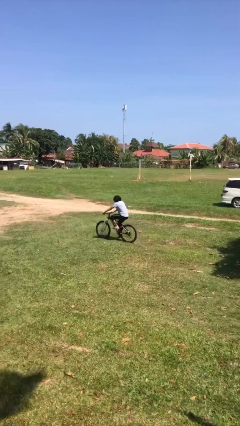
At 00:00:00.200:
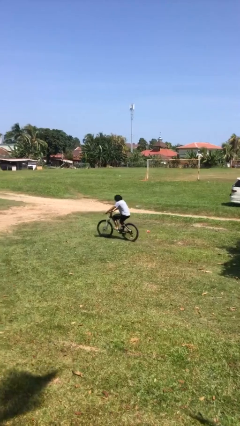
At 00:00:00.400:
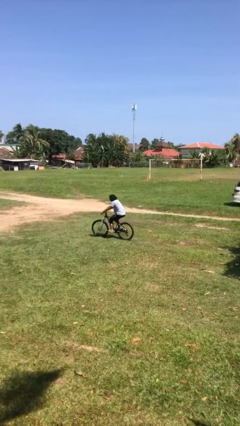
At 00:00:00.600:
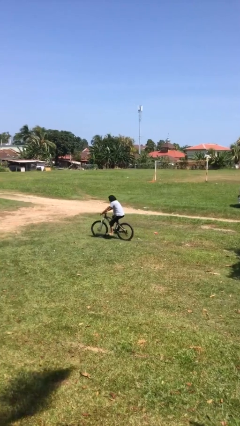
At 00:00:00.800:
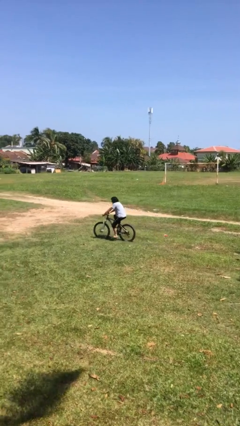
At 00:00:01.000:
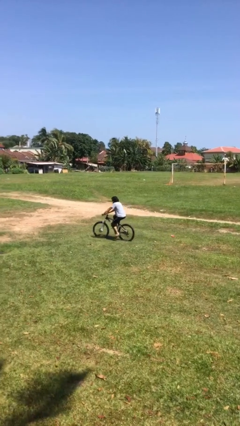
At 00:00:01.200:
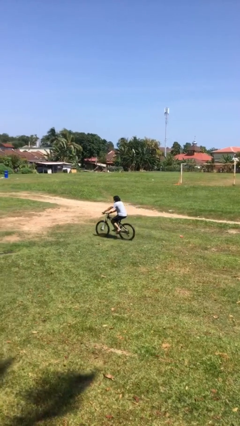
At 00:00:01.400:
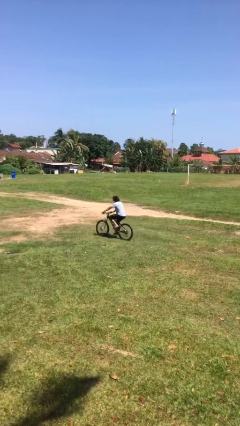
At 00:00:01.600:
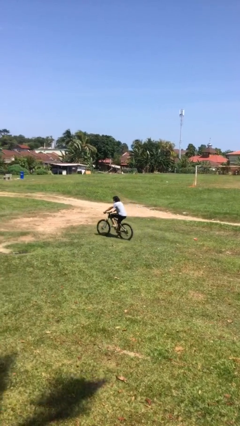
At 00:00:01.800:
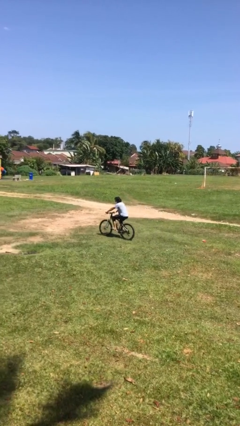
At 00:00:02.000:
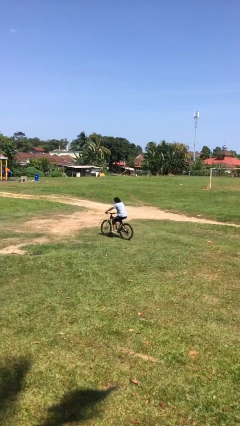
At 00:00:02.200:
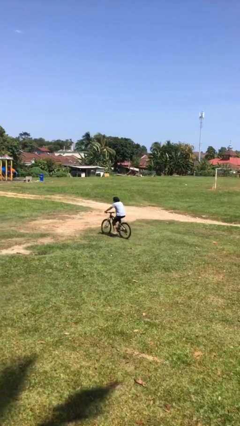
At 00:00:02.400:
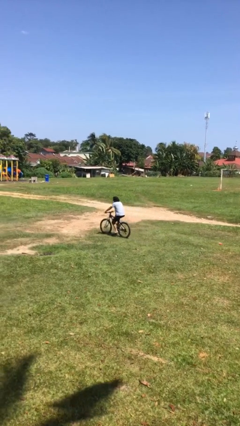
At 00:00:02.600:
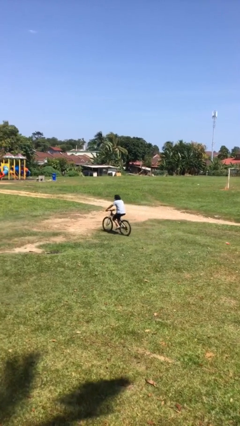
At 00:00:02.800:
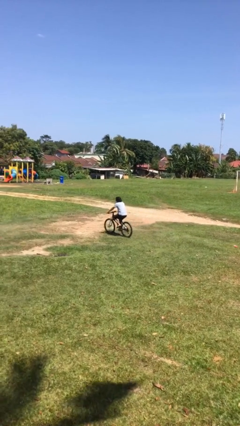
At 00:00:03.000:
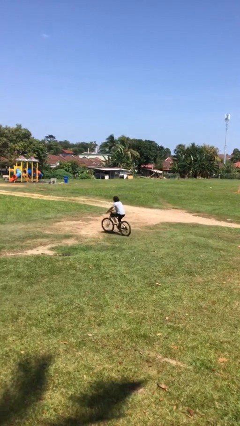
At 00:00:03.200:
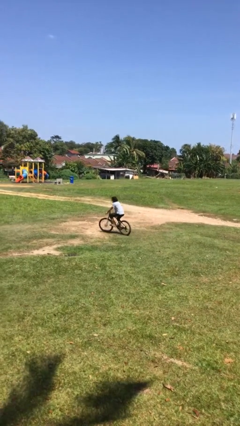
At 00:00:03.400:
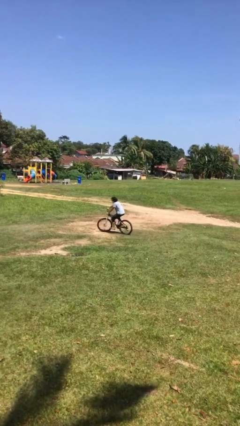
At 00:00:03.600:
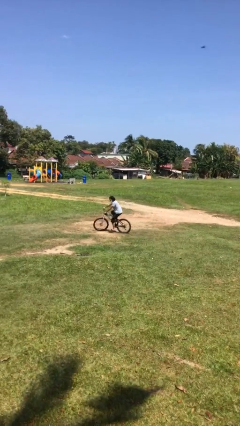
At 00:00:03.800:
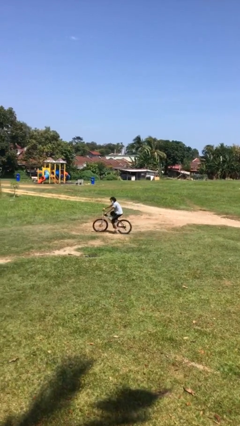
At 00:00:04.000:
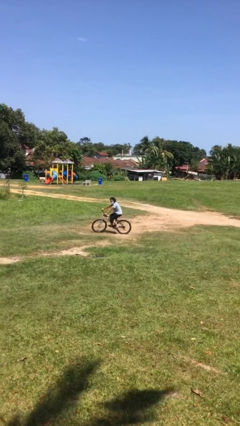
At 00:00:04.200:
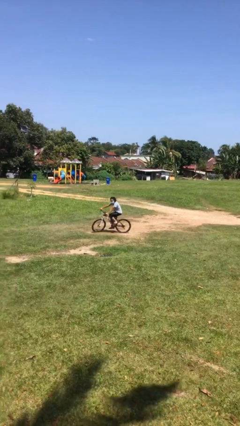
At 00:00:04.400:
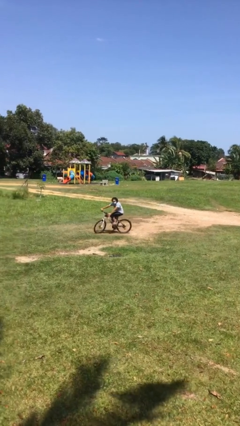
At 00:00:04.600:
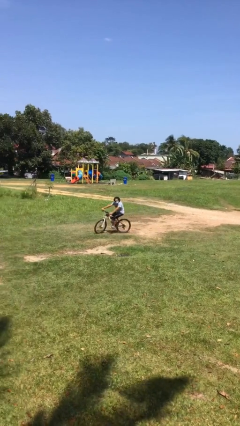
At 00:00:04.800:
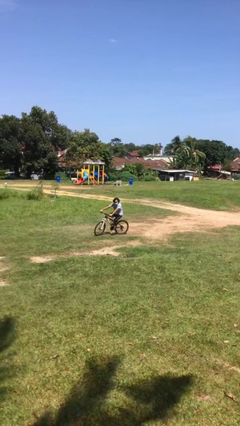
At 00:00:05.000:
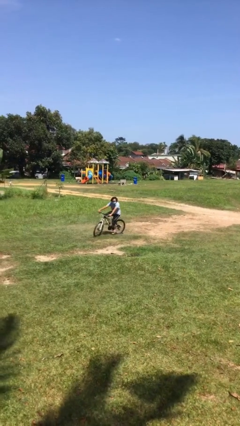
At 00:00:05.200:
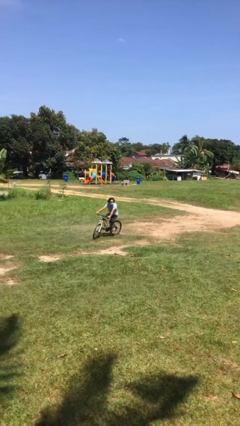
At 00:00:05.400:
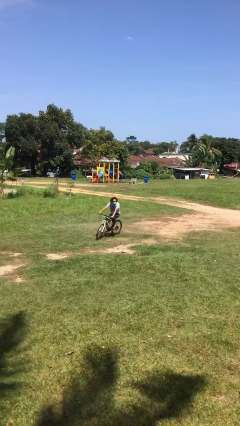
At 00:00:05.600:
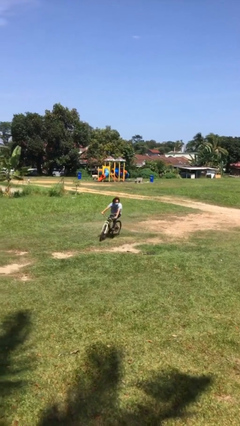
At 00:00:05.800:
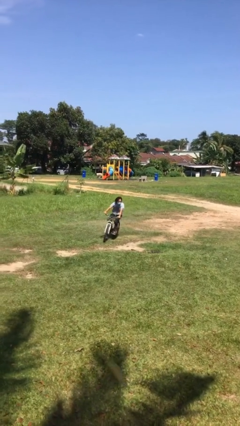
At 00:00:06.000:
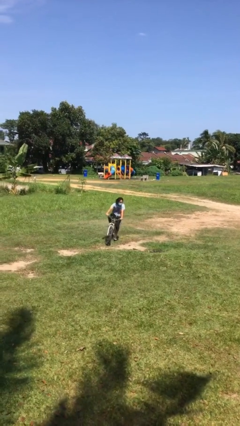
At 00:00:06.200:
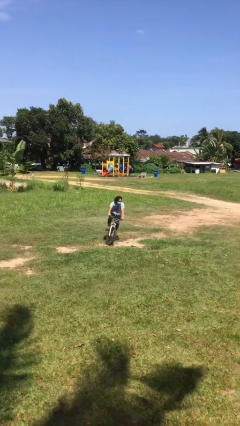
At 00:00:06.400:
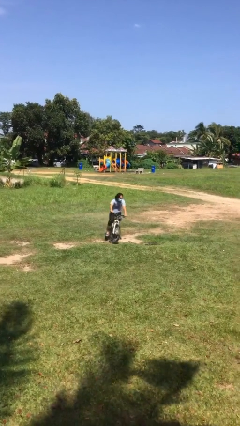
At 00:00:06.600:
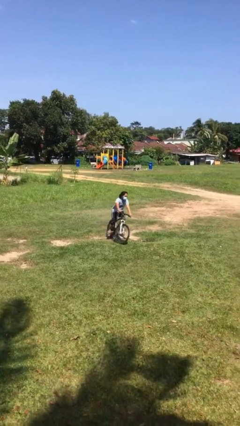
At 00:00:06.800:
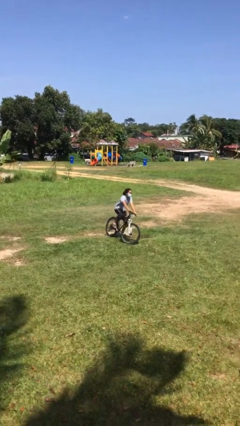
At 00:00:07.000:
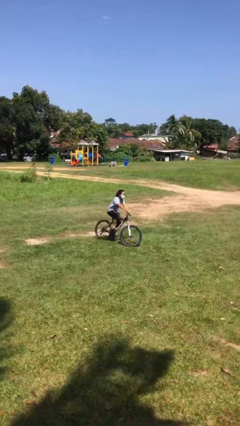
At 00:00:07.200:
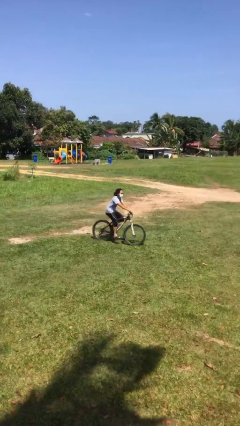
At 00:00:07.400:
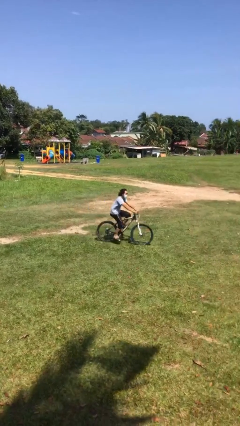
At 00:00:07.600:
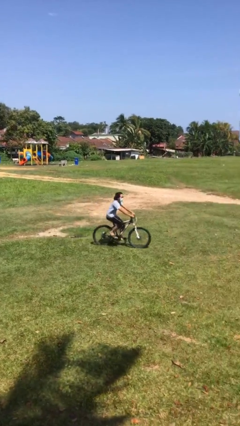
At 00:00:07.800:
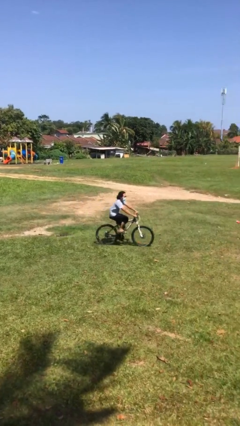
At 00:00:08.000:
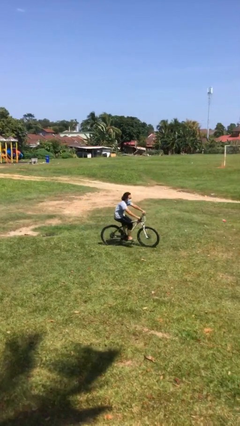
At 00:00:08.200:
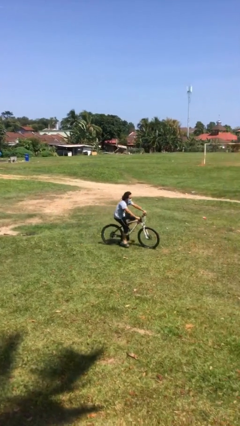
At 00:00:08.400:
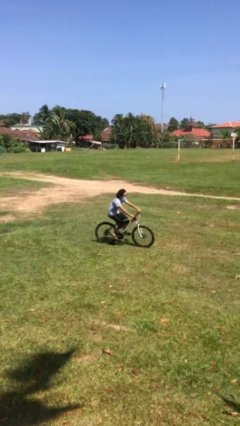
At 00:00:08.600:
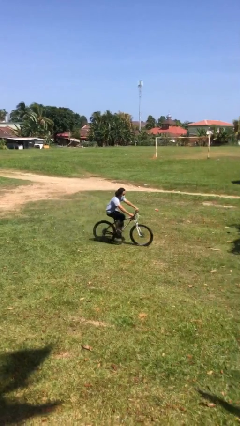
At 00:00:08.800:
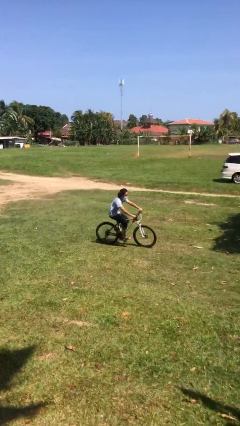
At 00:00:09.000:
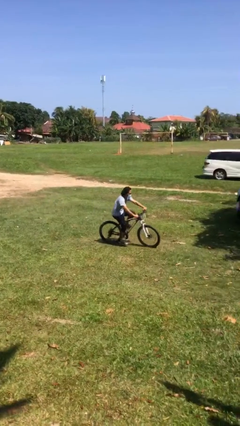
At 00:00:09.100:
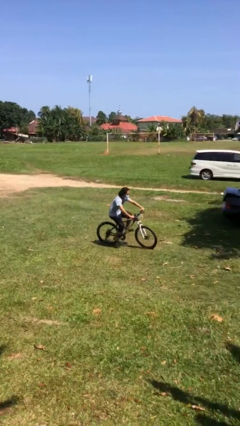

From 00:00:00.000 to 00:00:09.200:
person rides bicycle

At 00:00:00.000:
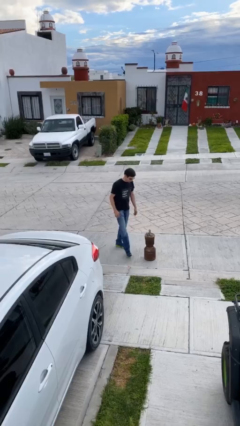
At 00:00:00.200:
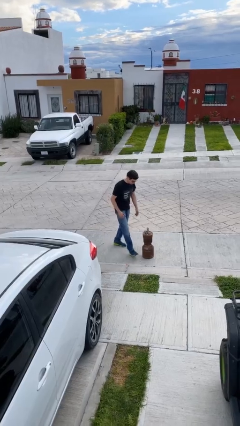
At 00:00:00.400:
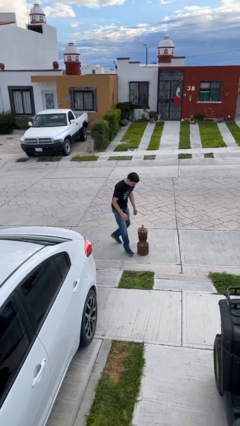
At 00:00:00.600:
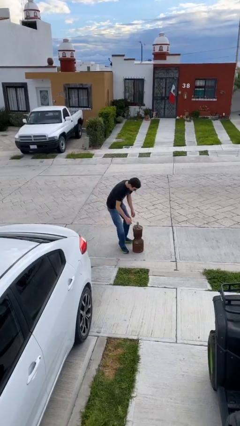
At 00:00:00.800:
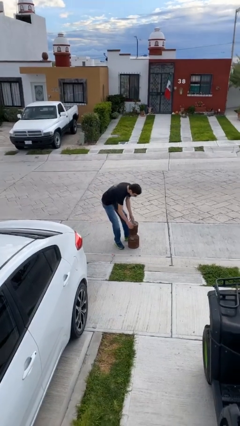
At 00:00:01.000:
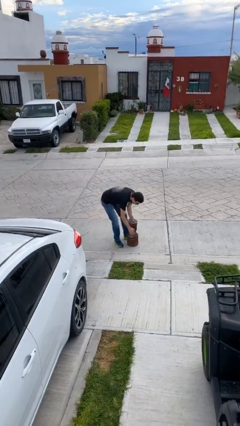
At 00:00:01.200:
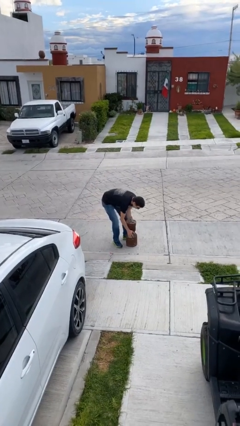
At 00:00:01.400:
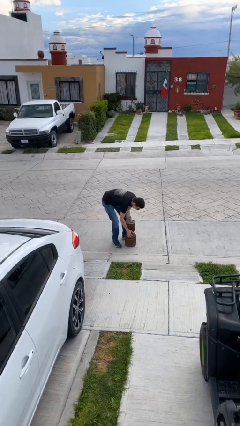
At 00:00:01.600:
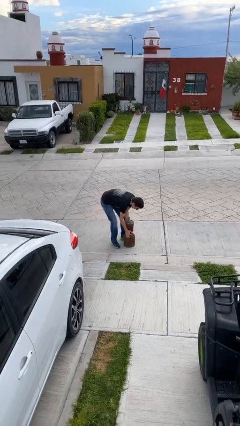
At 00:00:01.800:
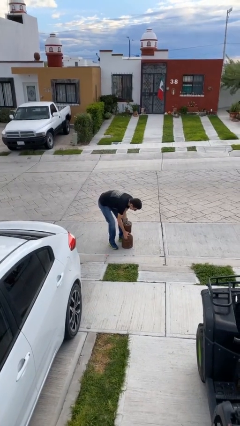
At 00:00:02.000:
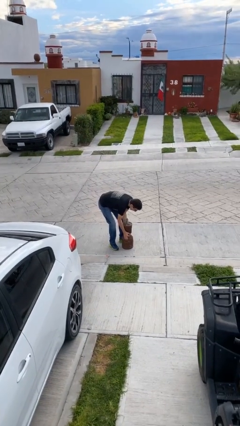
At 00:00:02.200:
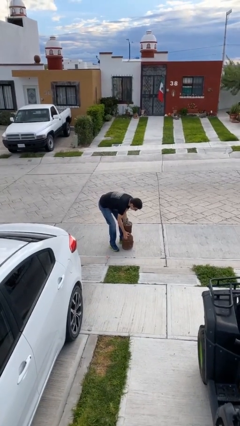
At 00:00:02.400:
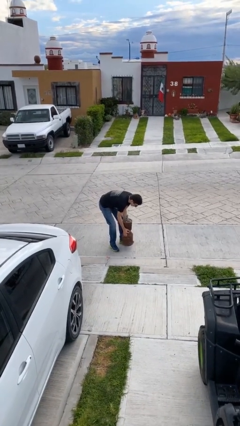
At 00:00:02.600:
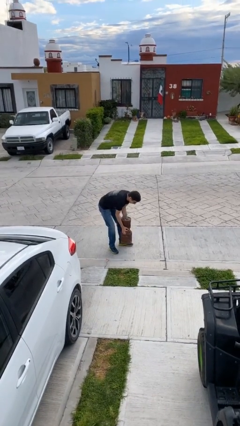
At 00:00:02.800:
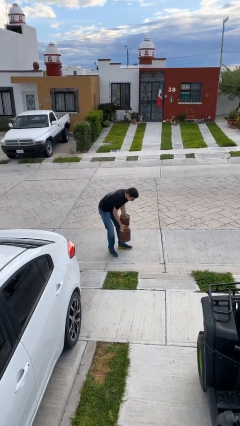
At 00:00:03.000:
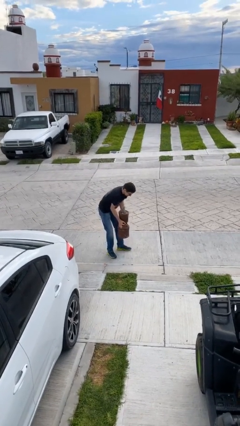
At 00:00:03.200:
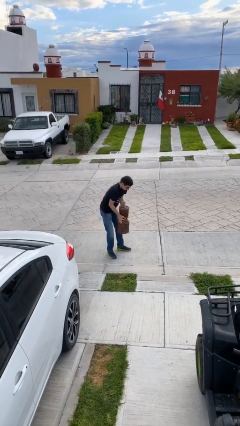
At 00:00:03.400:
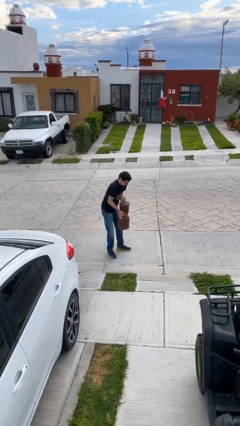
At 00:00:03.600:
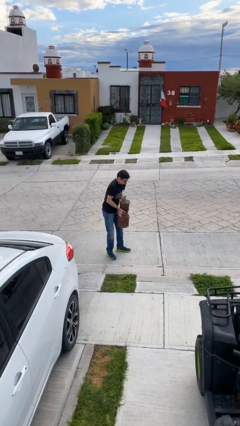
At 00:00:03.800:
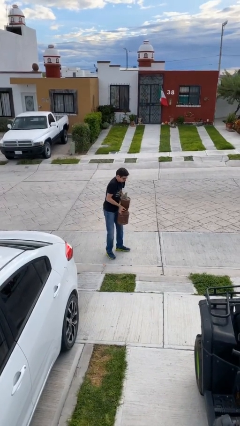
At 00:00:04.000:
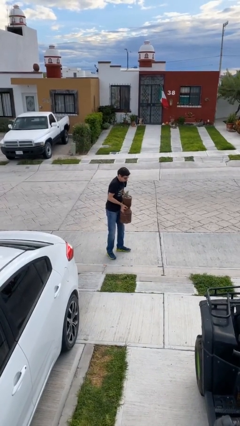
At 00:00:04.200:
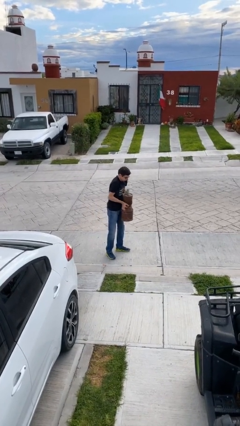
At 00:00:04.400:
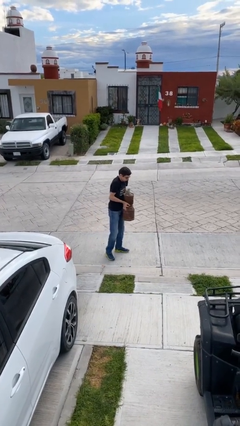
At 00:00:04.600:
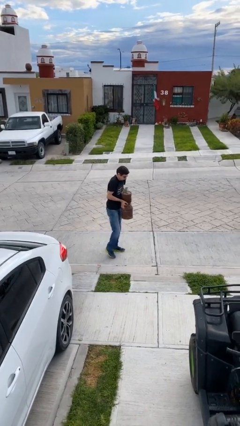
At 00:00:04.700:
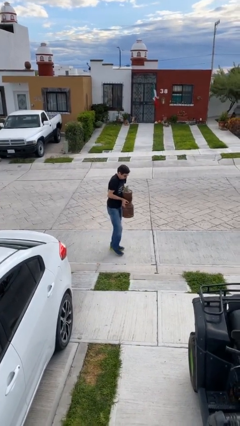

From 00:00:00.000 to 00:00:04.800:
person picks up object from floor

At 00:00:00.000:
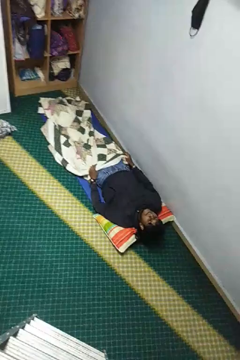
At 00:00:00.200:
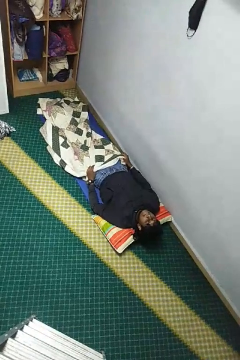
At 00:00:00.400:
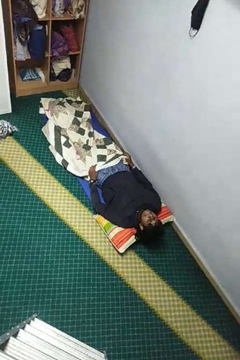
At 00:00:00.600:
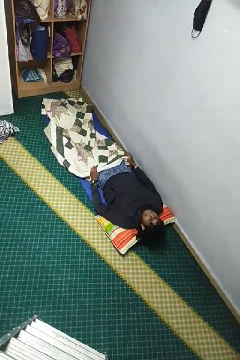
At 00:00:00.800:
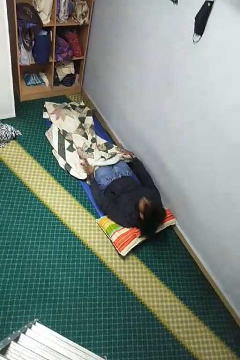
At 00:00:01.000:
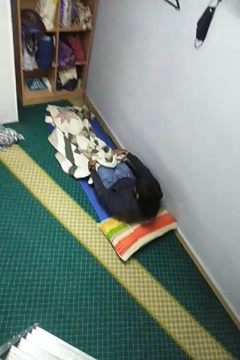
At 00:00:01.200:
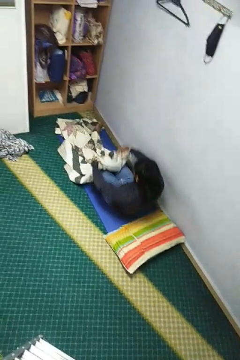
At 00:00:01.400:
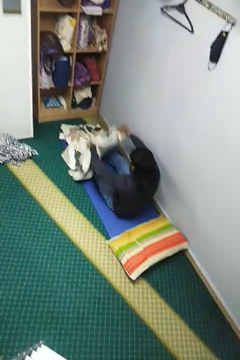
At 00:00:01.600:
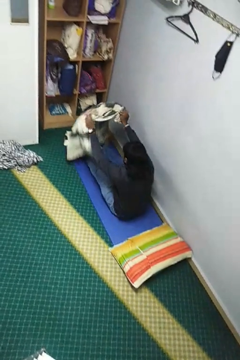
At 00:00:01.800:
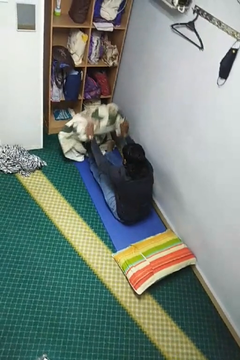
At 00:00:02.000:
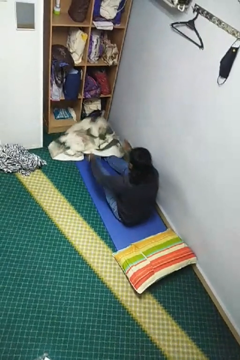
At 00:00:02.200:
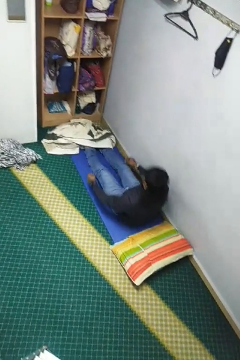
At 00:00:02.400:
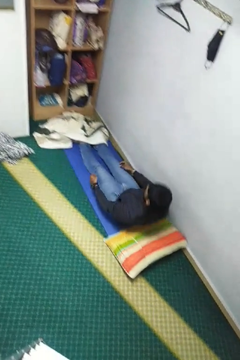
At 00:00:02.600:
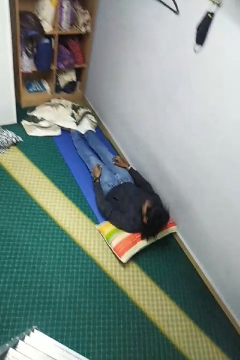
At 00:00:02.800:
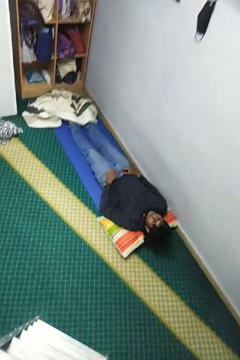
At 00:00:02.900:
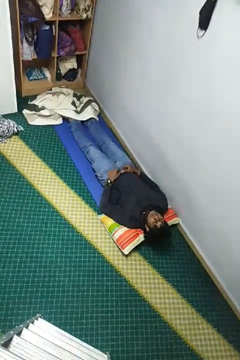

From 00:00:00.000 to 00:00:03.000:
person uncovers with bedsheets

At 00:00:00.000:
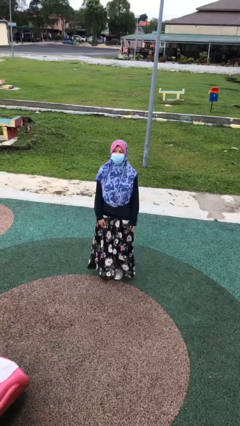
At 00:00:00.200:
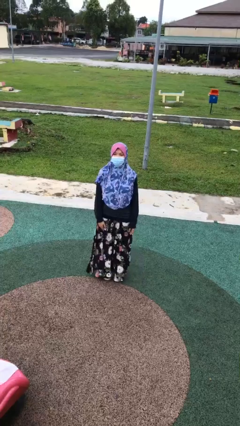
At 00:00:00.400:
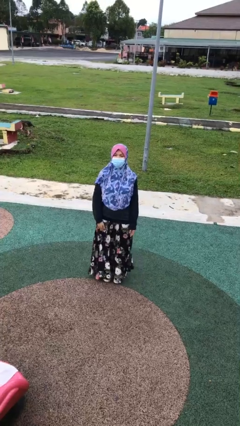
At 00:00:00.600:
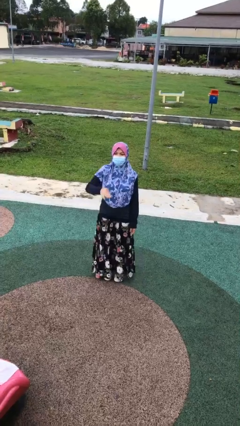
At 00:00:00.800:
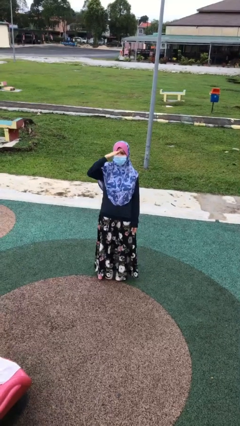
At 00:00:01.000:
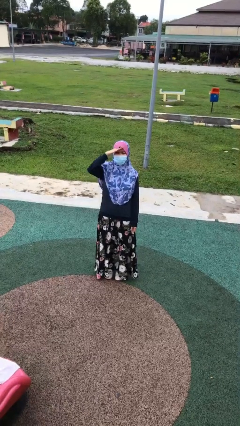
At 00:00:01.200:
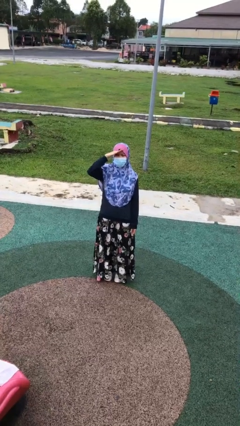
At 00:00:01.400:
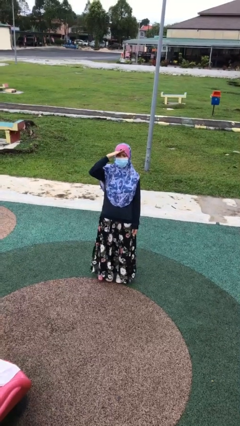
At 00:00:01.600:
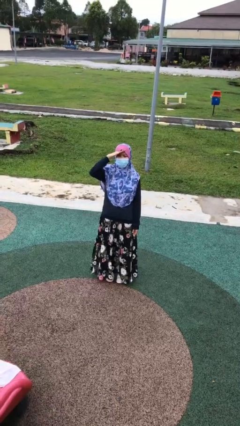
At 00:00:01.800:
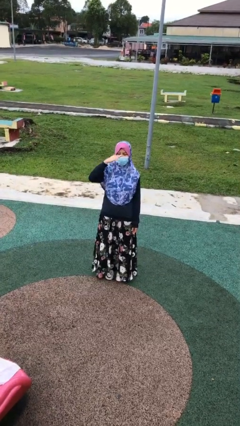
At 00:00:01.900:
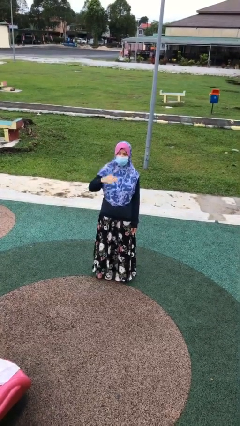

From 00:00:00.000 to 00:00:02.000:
person salutes
